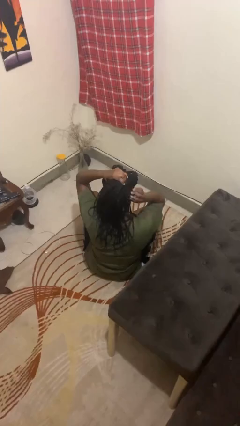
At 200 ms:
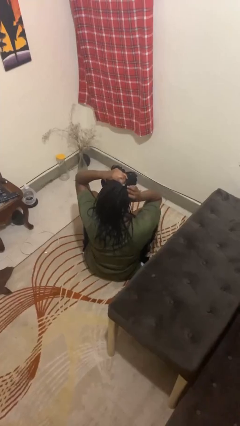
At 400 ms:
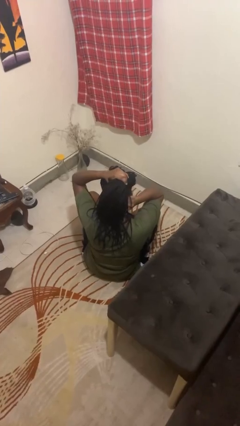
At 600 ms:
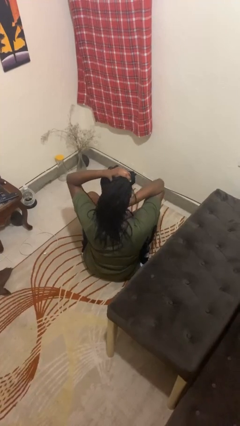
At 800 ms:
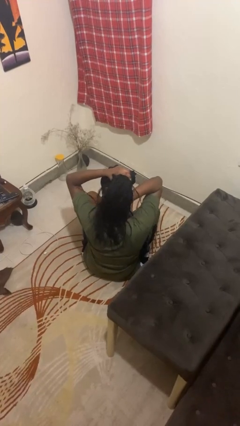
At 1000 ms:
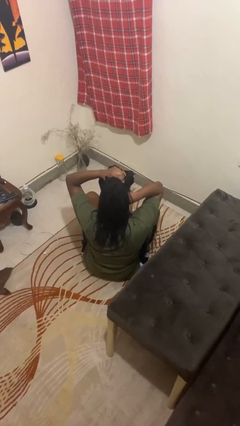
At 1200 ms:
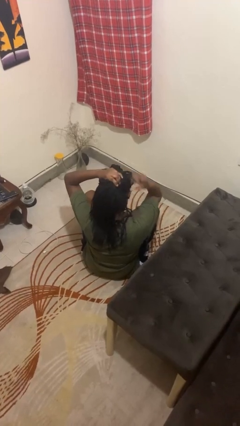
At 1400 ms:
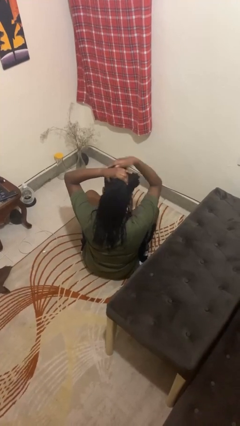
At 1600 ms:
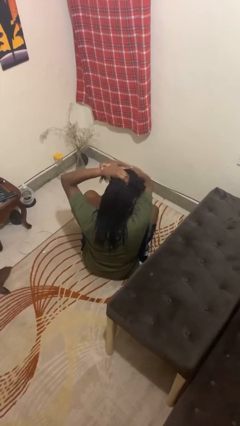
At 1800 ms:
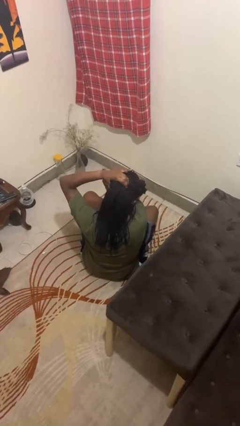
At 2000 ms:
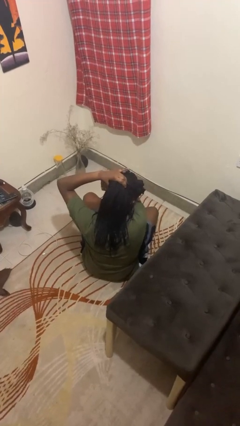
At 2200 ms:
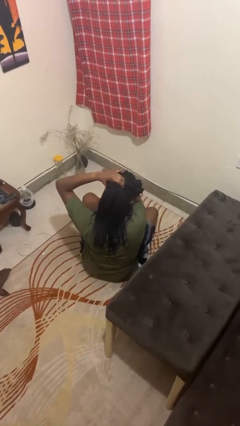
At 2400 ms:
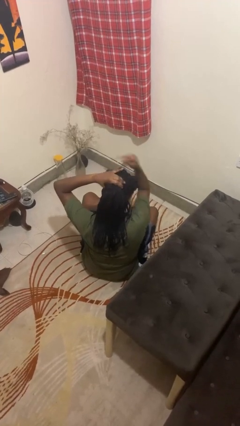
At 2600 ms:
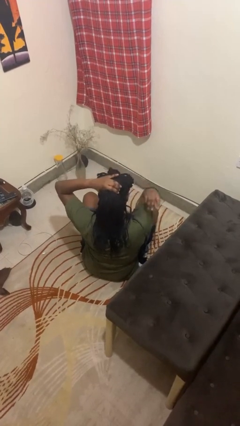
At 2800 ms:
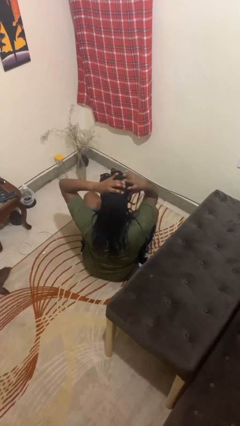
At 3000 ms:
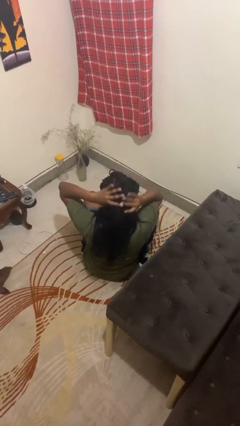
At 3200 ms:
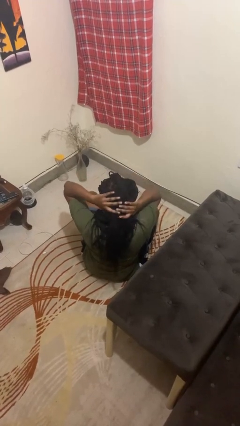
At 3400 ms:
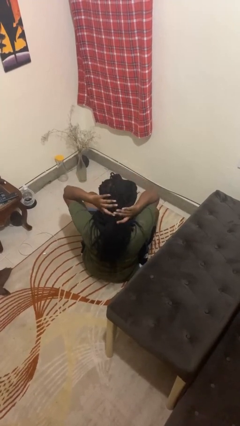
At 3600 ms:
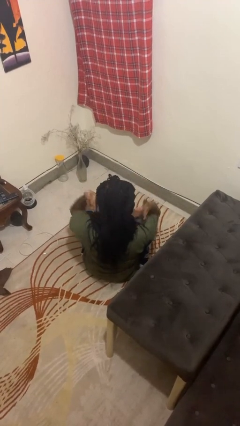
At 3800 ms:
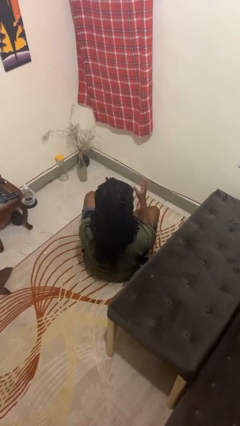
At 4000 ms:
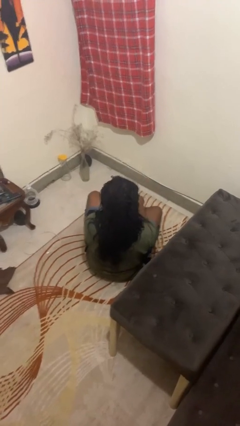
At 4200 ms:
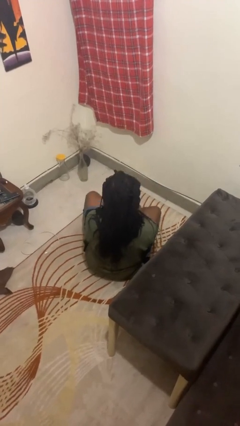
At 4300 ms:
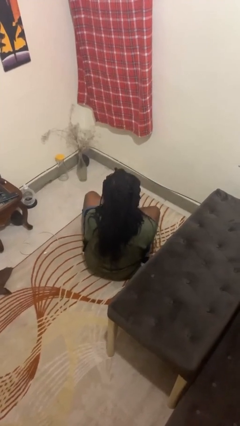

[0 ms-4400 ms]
person takes off hairtie

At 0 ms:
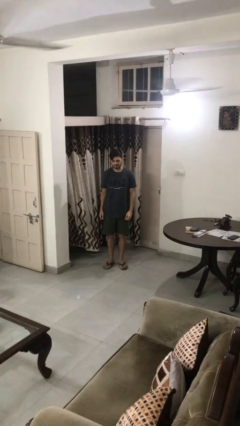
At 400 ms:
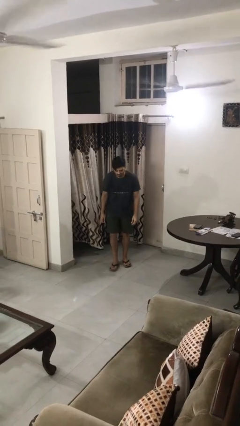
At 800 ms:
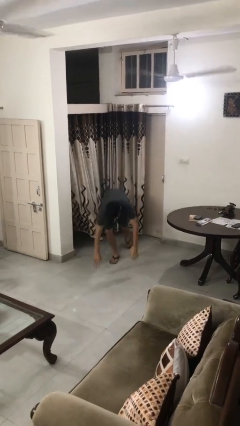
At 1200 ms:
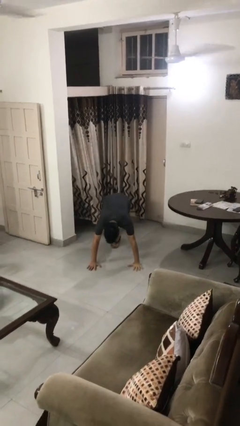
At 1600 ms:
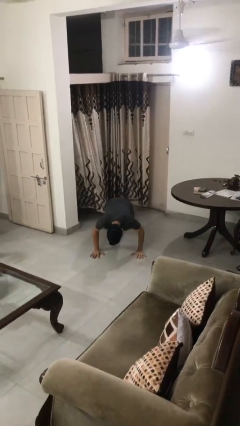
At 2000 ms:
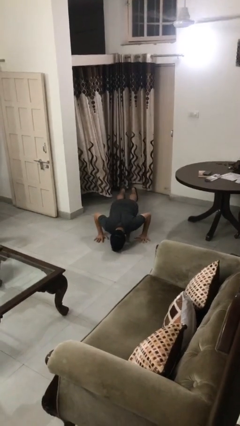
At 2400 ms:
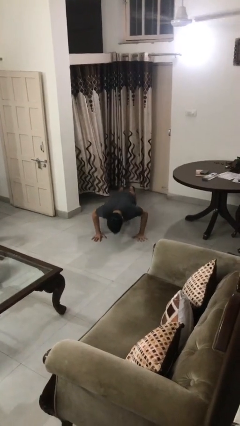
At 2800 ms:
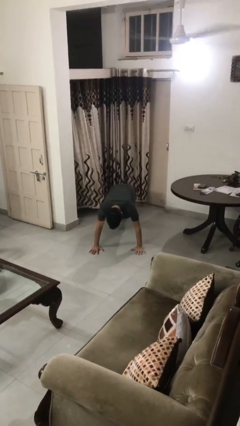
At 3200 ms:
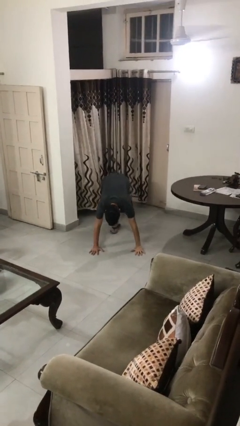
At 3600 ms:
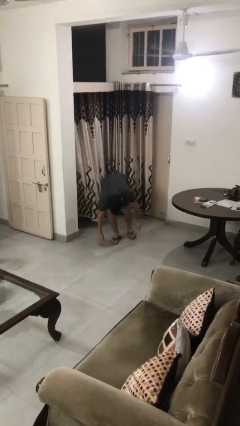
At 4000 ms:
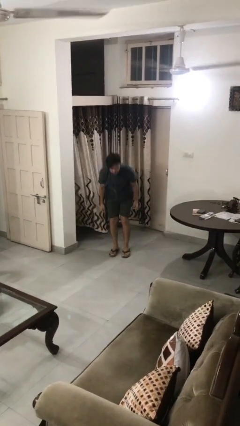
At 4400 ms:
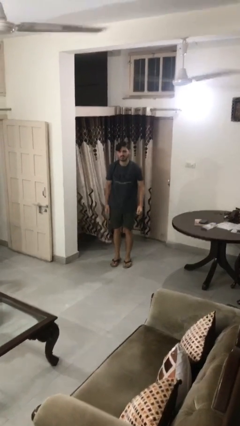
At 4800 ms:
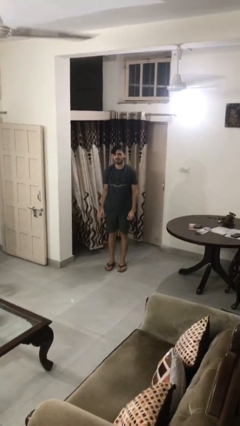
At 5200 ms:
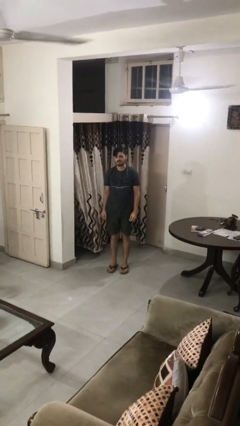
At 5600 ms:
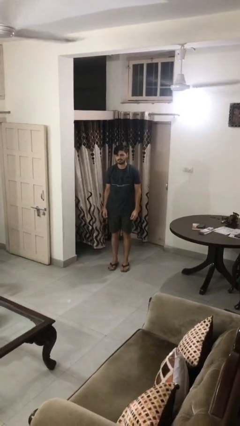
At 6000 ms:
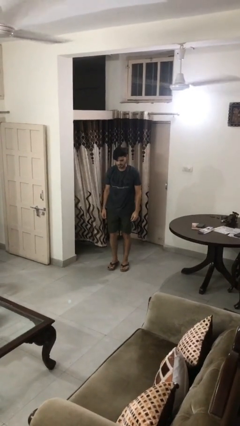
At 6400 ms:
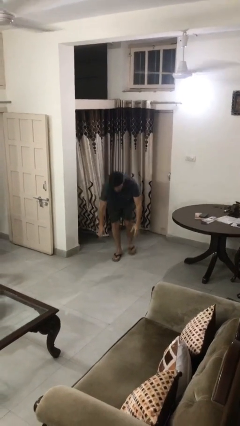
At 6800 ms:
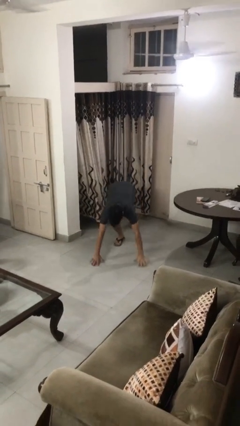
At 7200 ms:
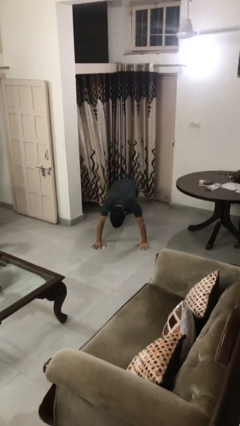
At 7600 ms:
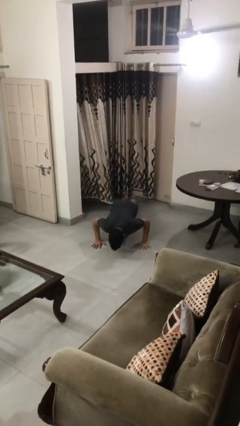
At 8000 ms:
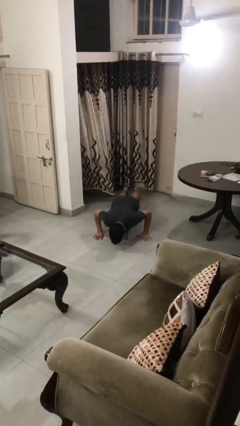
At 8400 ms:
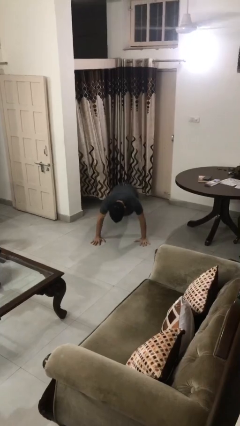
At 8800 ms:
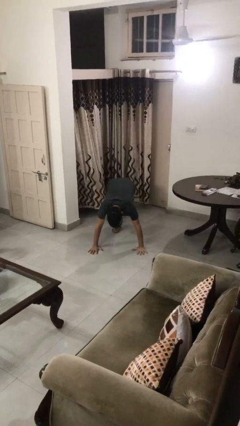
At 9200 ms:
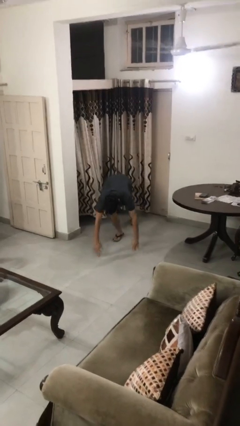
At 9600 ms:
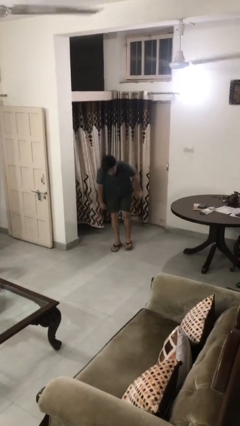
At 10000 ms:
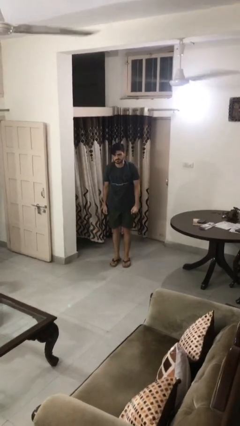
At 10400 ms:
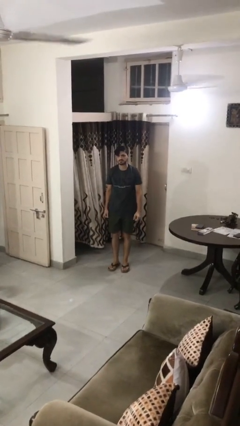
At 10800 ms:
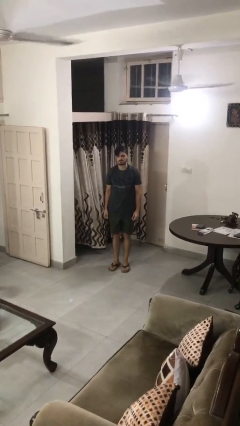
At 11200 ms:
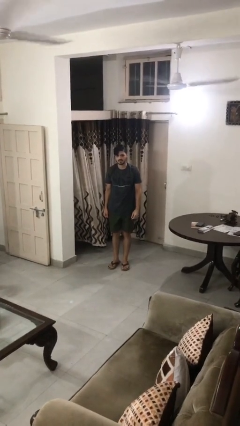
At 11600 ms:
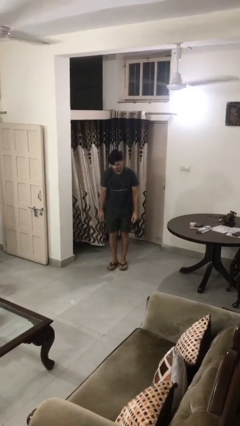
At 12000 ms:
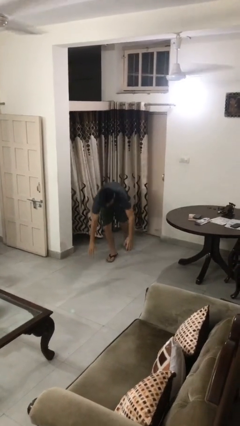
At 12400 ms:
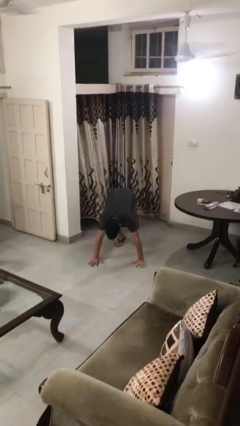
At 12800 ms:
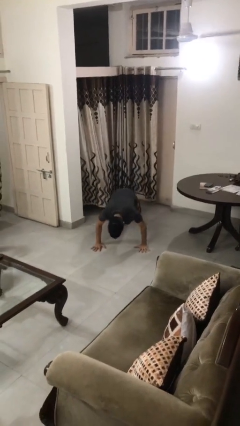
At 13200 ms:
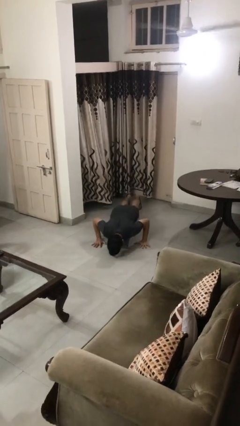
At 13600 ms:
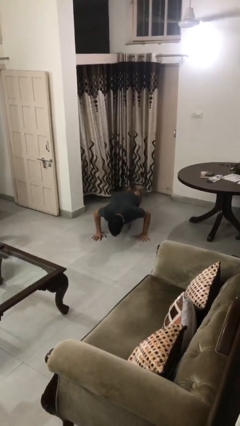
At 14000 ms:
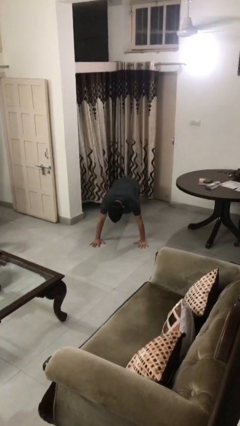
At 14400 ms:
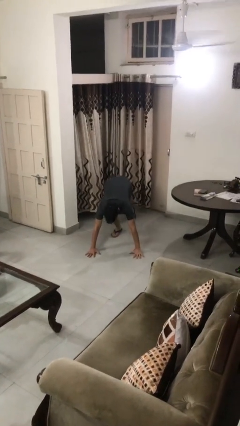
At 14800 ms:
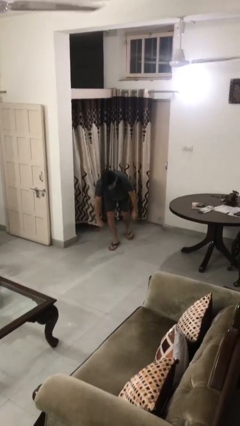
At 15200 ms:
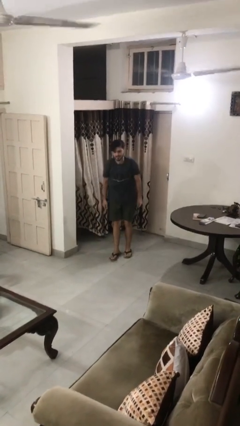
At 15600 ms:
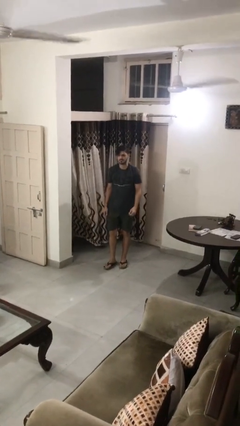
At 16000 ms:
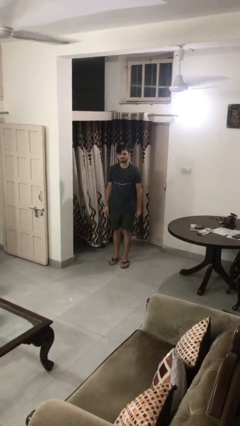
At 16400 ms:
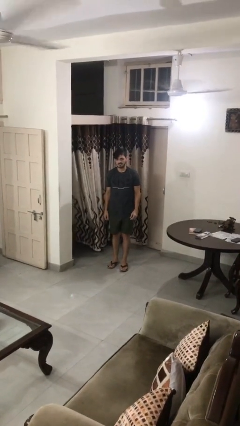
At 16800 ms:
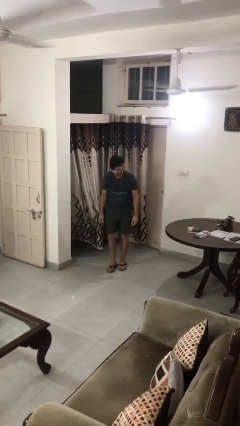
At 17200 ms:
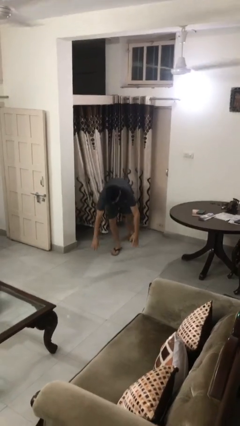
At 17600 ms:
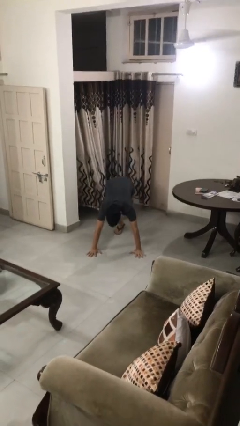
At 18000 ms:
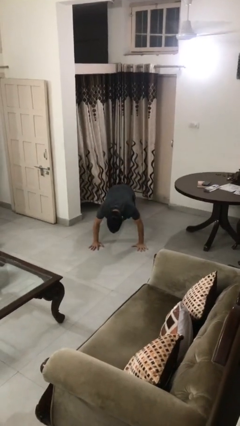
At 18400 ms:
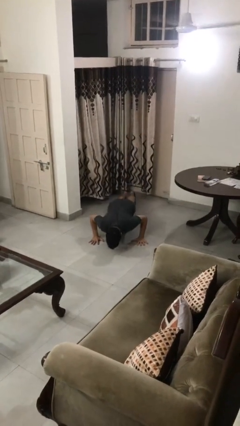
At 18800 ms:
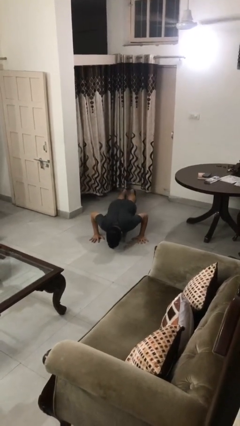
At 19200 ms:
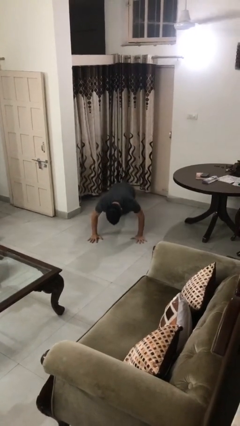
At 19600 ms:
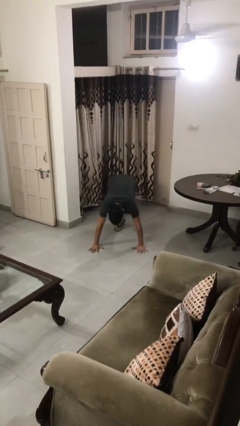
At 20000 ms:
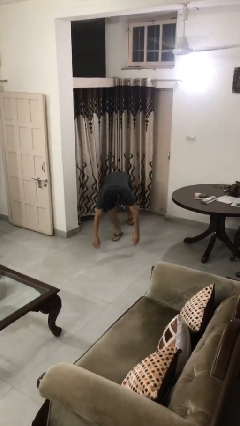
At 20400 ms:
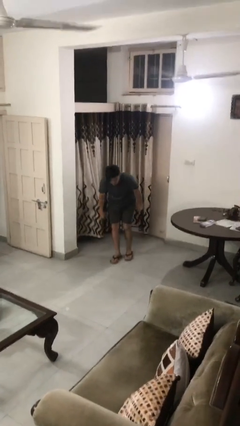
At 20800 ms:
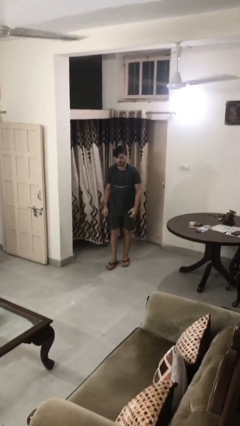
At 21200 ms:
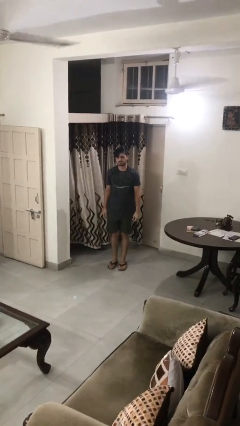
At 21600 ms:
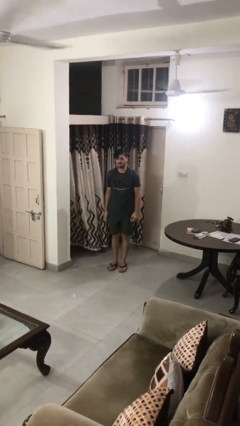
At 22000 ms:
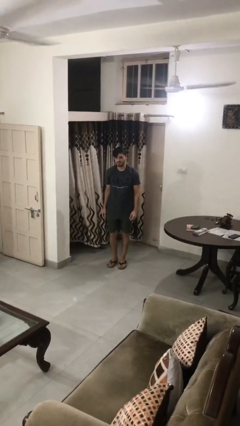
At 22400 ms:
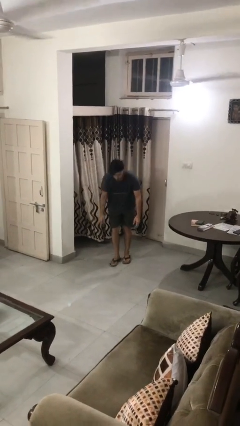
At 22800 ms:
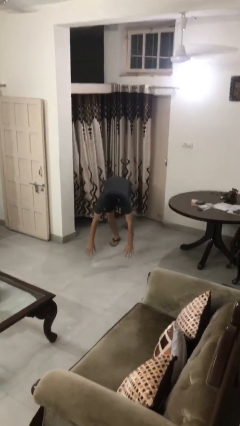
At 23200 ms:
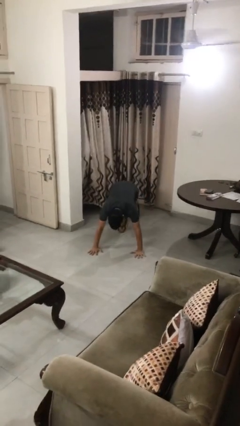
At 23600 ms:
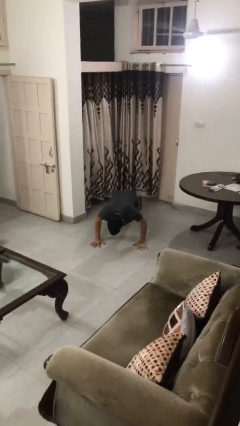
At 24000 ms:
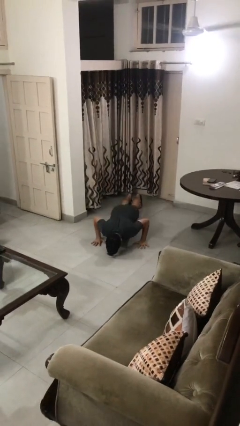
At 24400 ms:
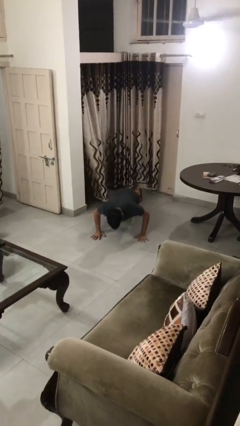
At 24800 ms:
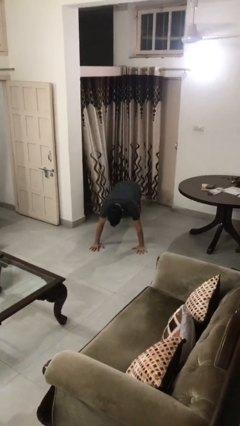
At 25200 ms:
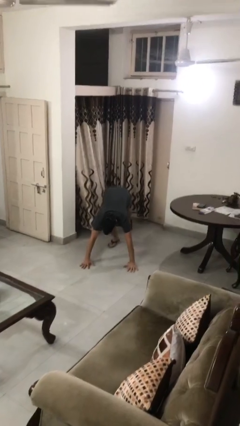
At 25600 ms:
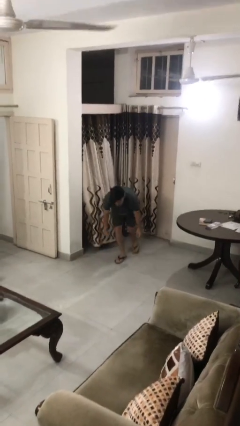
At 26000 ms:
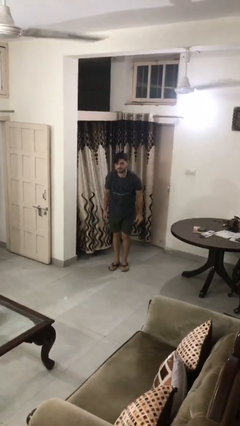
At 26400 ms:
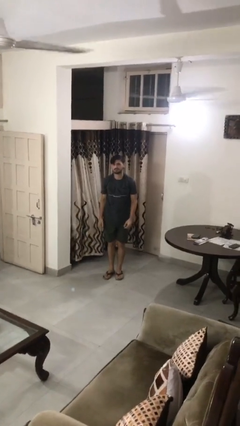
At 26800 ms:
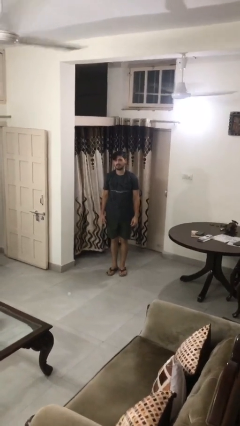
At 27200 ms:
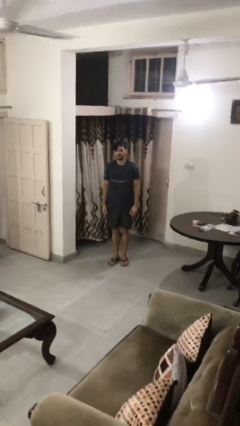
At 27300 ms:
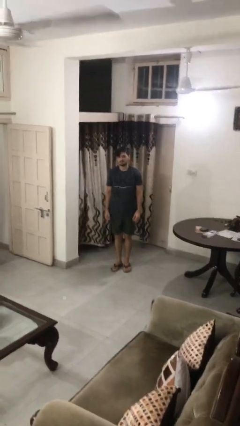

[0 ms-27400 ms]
person exercises with pushup
